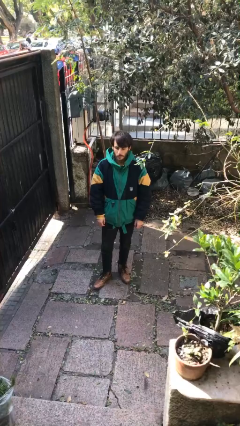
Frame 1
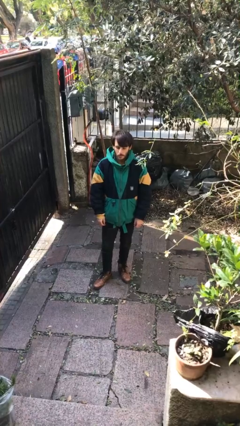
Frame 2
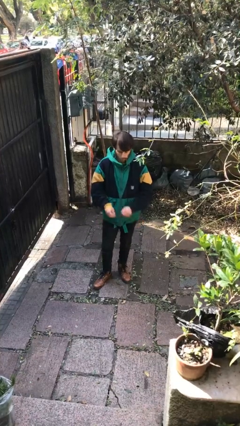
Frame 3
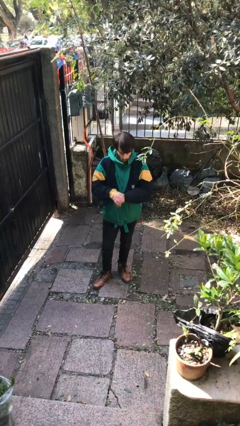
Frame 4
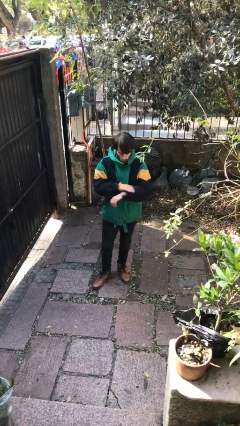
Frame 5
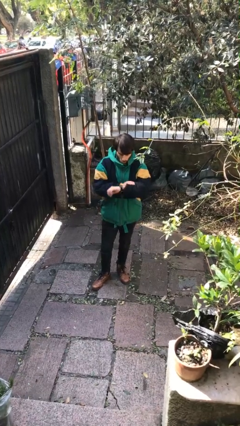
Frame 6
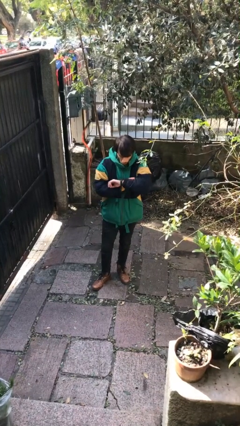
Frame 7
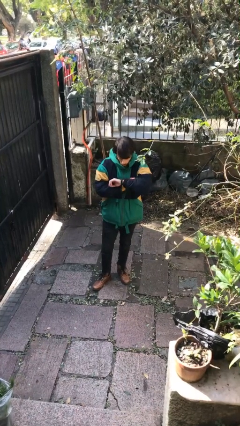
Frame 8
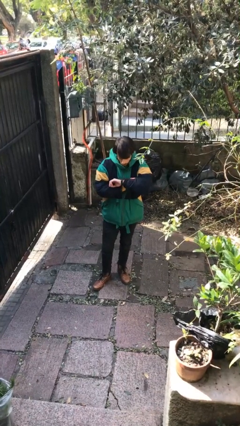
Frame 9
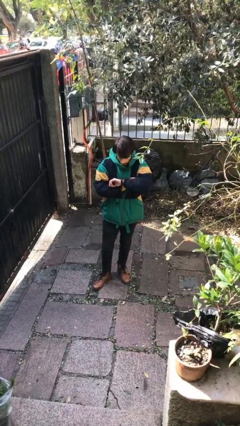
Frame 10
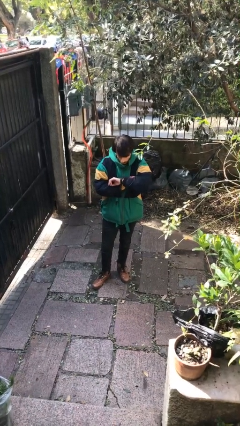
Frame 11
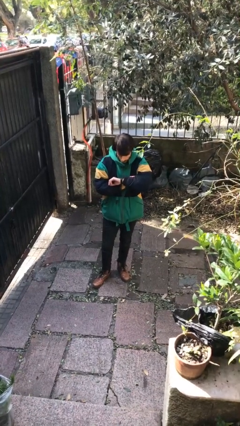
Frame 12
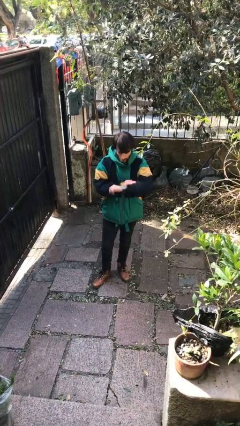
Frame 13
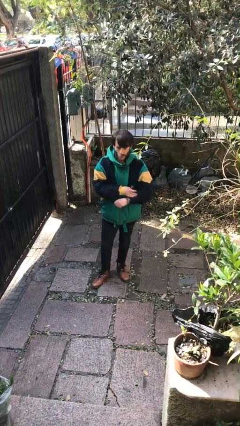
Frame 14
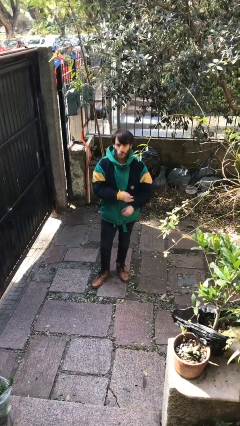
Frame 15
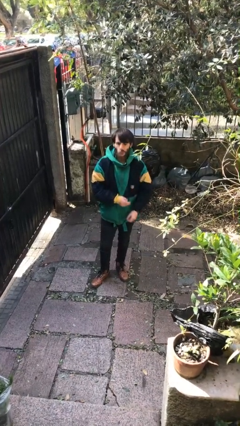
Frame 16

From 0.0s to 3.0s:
person looks at wristwatch

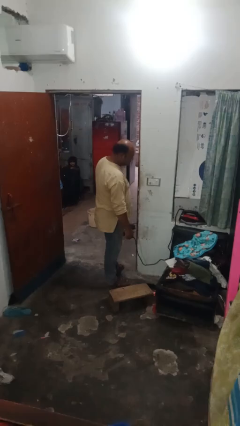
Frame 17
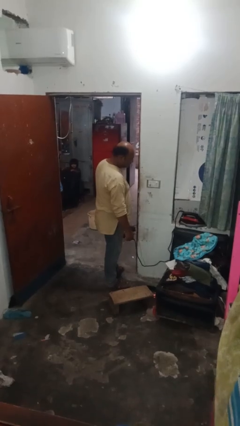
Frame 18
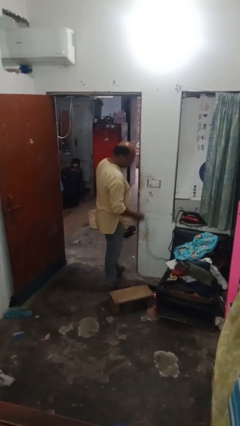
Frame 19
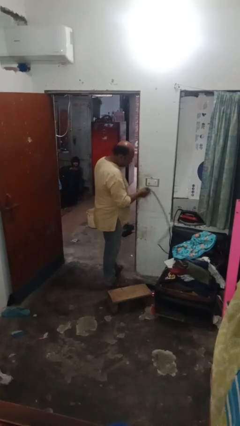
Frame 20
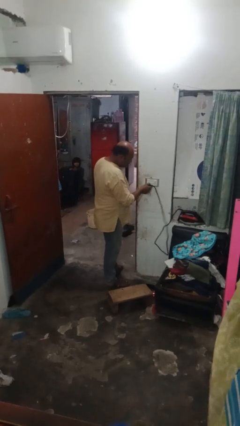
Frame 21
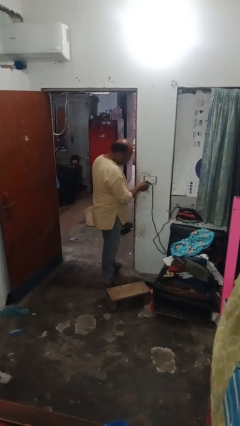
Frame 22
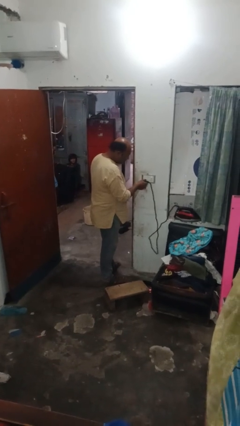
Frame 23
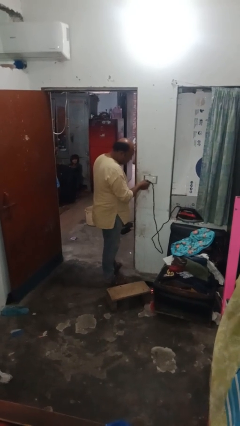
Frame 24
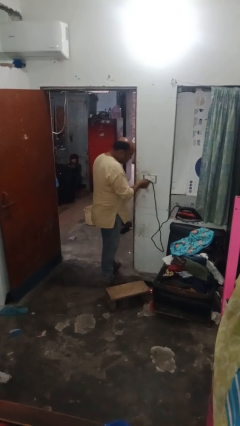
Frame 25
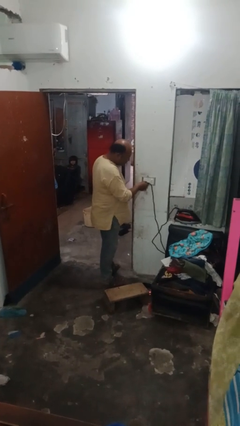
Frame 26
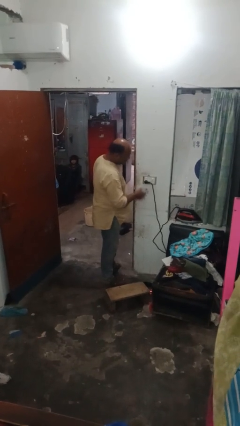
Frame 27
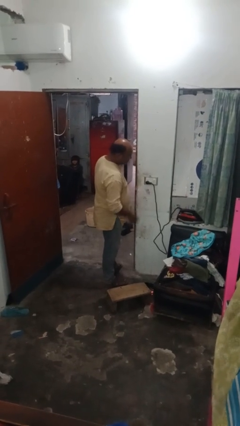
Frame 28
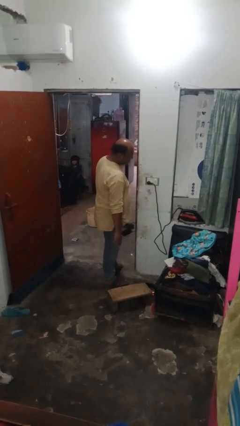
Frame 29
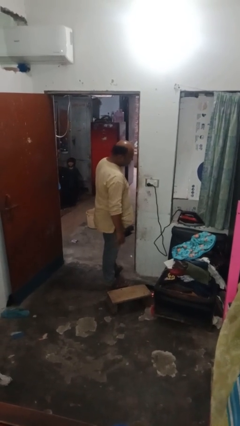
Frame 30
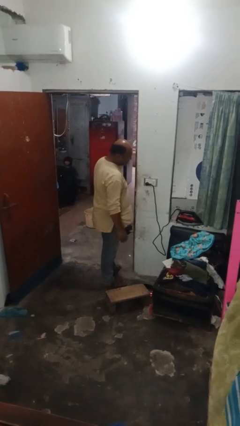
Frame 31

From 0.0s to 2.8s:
person plugs into electrical socket

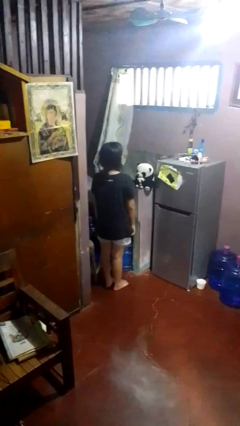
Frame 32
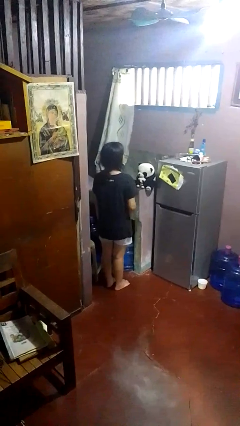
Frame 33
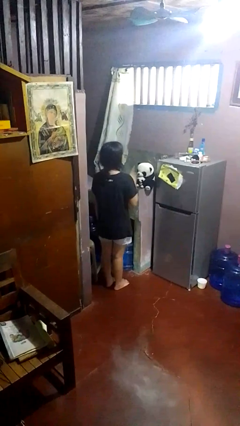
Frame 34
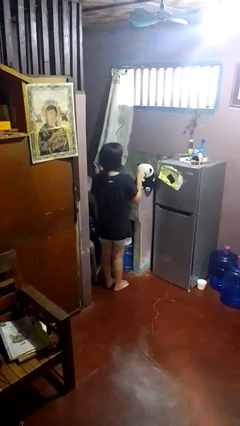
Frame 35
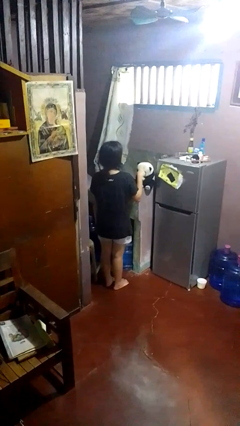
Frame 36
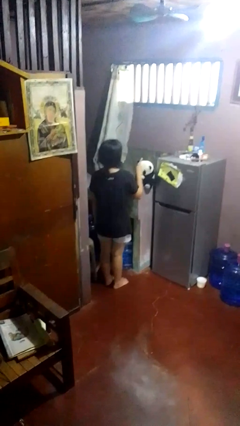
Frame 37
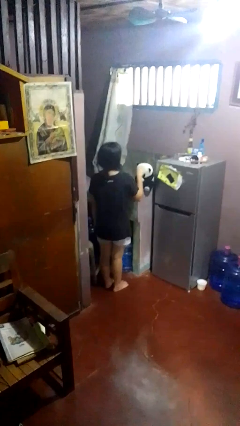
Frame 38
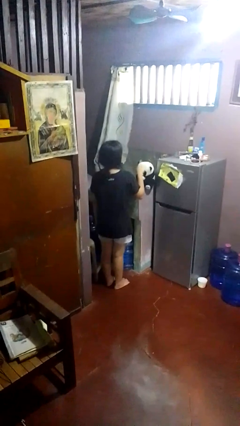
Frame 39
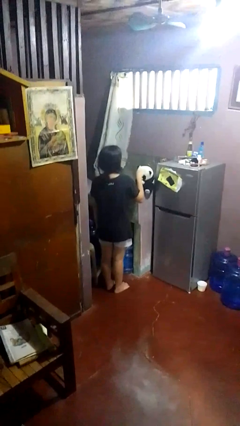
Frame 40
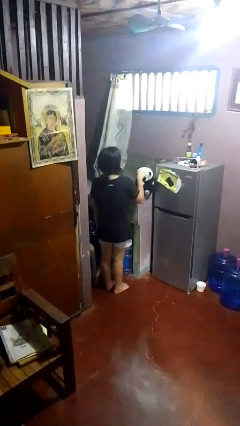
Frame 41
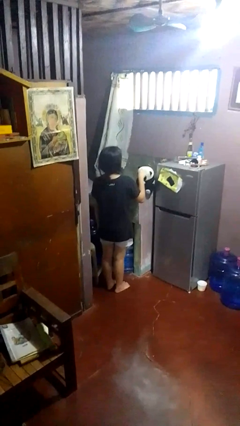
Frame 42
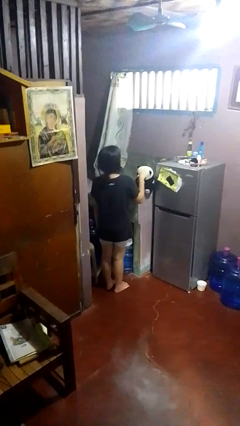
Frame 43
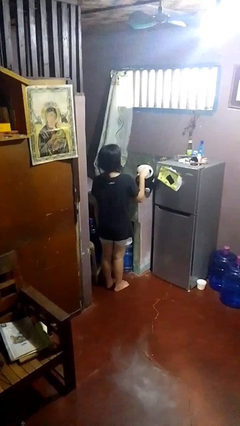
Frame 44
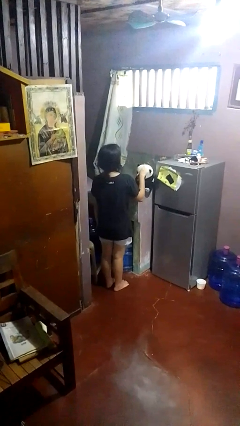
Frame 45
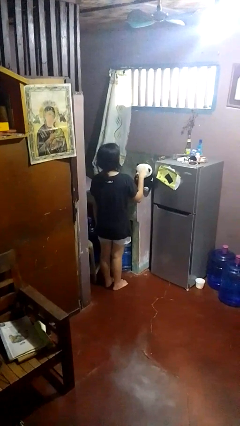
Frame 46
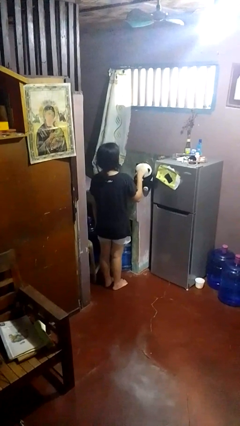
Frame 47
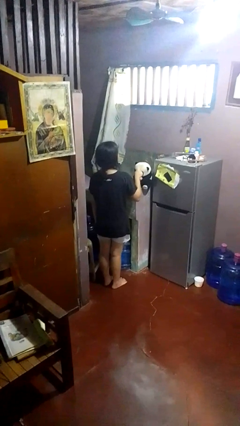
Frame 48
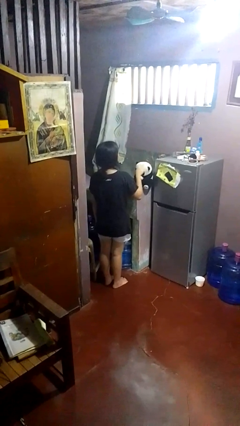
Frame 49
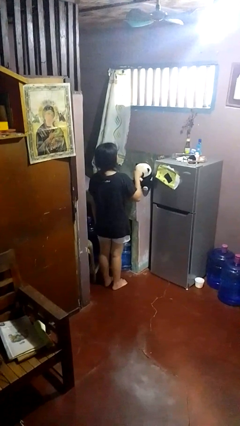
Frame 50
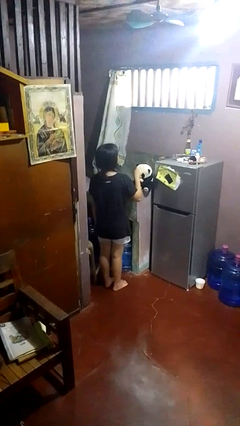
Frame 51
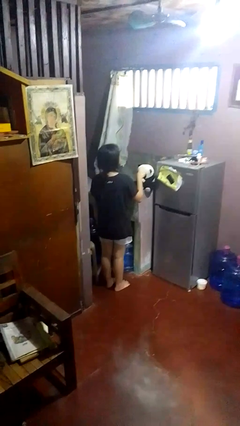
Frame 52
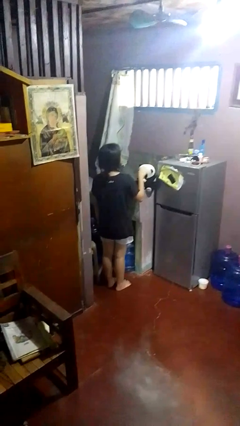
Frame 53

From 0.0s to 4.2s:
person taps object with finger

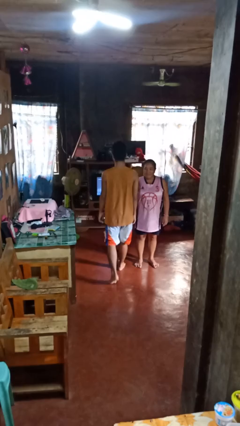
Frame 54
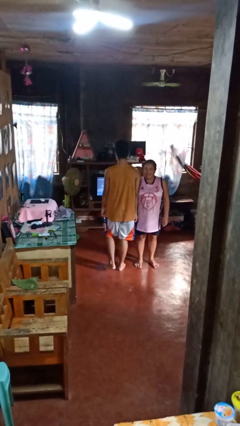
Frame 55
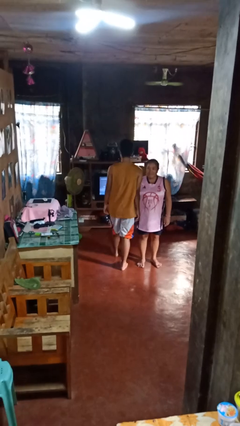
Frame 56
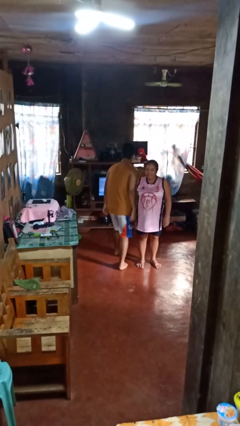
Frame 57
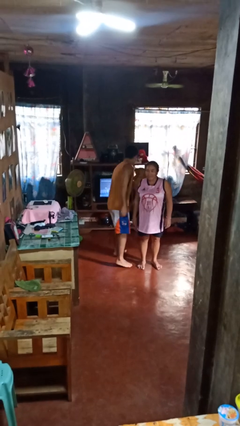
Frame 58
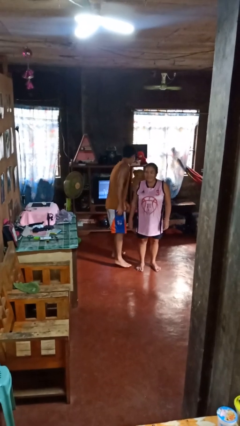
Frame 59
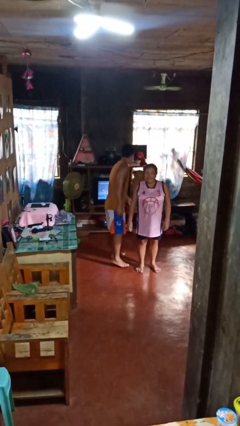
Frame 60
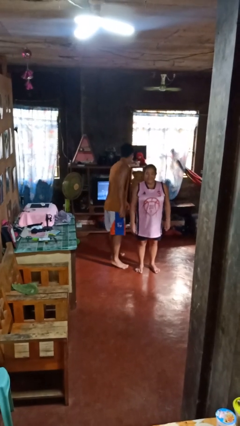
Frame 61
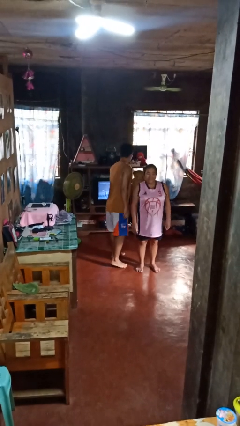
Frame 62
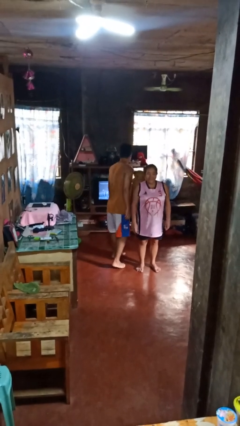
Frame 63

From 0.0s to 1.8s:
person bumps into person

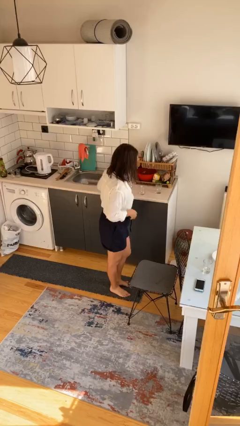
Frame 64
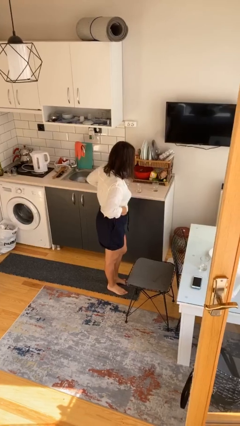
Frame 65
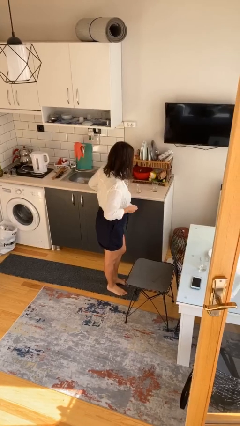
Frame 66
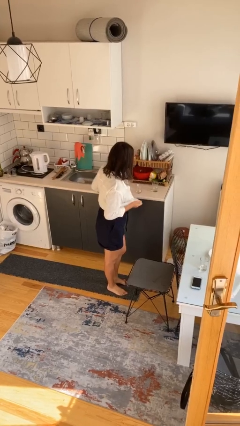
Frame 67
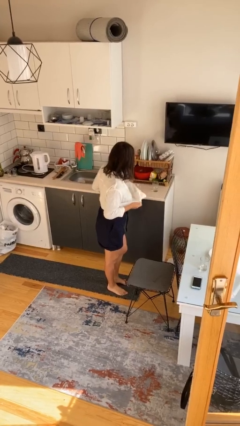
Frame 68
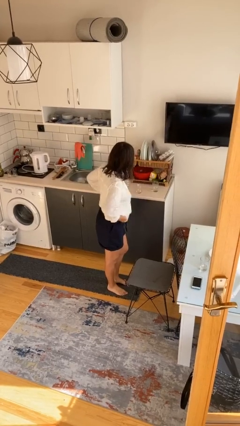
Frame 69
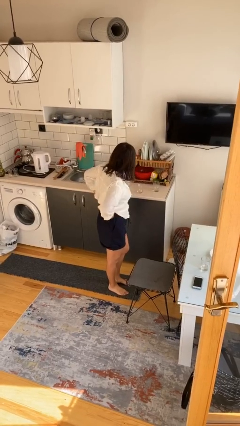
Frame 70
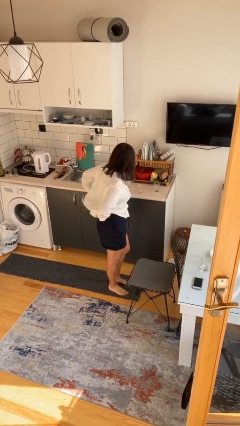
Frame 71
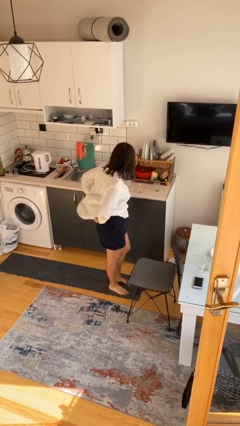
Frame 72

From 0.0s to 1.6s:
person untucks shirt

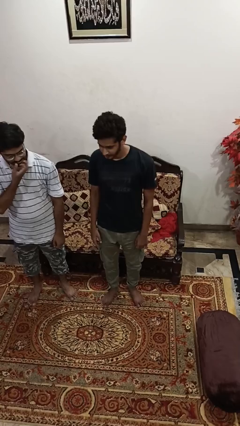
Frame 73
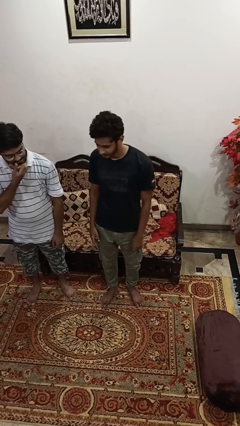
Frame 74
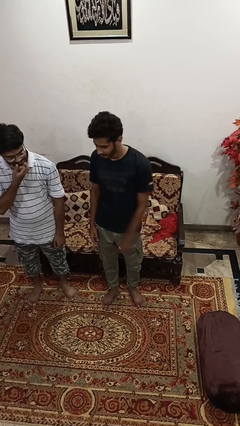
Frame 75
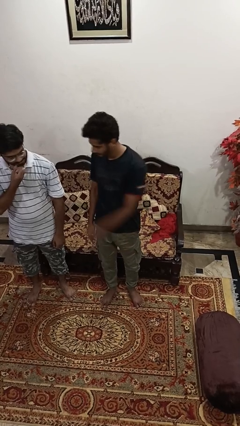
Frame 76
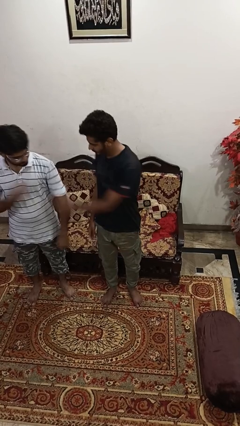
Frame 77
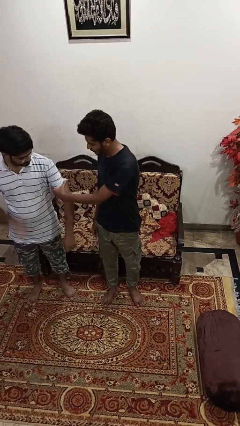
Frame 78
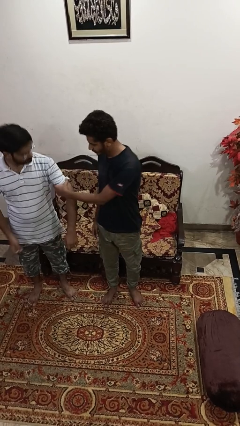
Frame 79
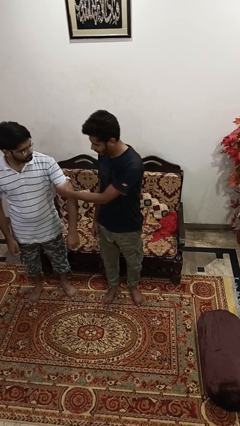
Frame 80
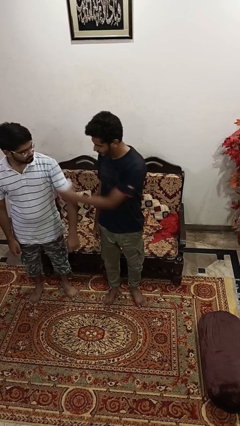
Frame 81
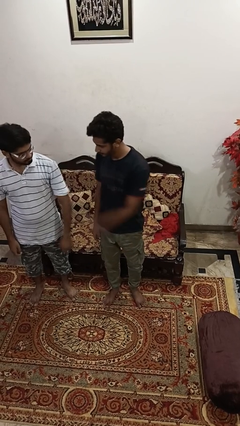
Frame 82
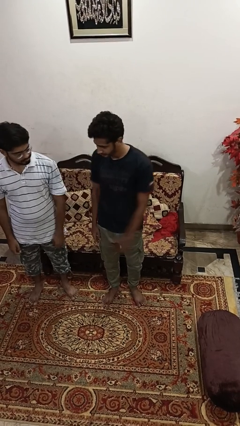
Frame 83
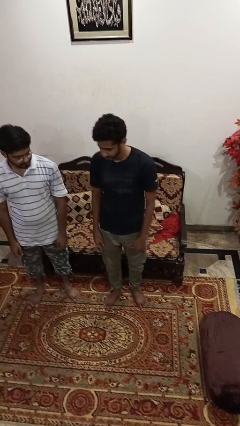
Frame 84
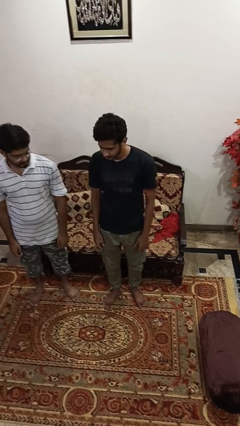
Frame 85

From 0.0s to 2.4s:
person grabs person by bicep

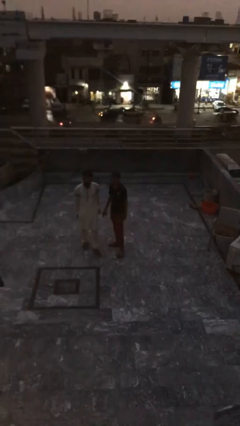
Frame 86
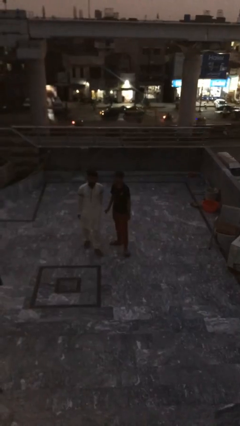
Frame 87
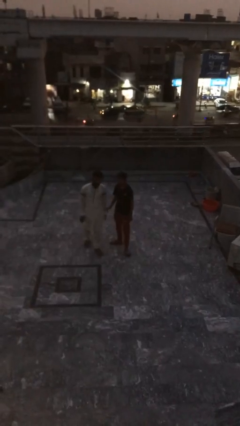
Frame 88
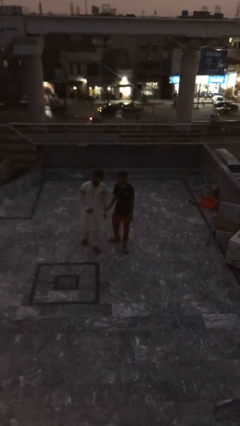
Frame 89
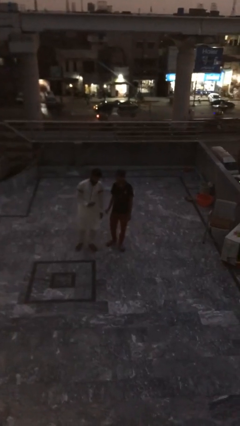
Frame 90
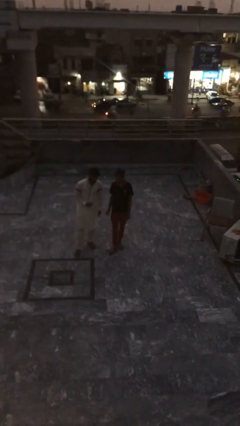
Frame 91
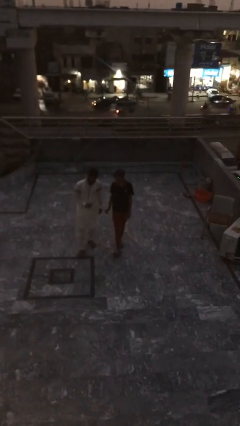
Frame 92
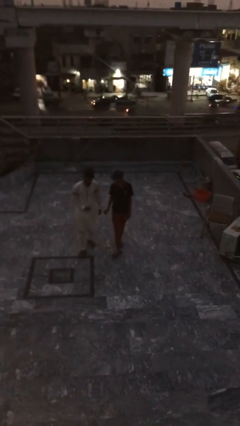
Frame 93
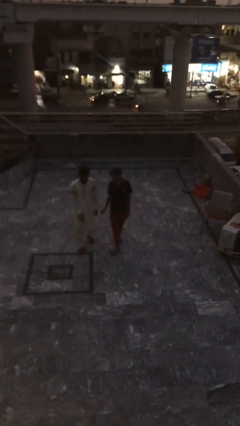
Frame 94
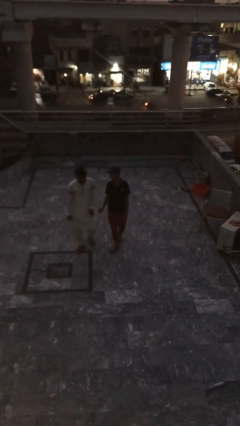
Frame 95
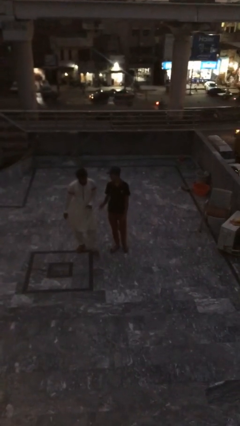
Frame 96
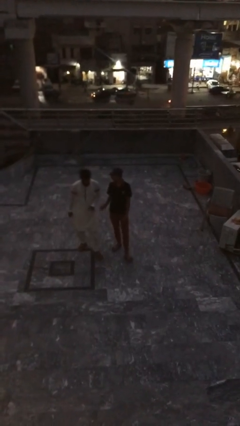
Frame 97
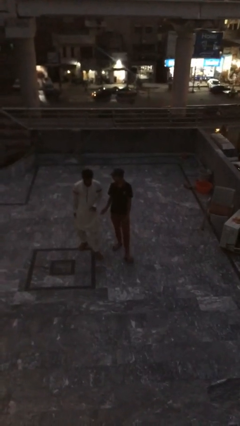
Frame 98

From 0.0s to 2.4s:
person talks to person
